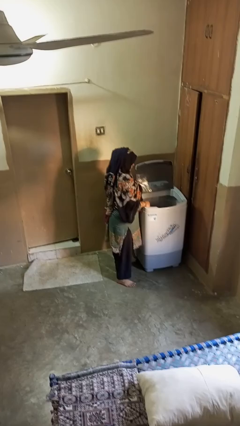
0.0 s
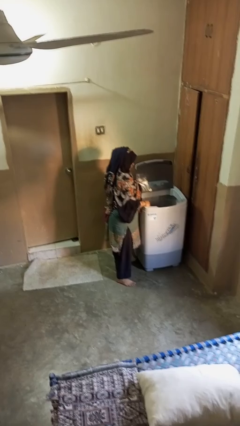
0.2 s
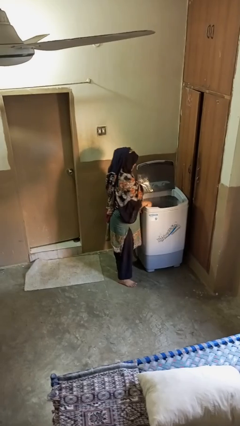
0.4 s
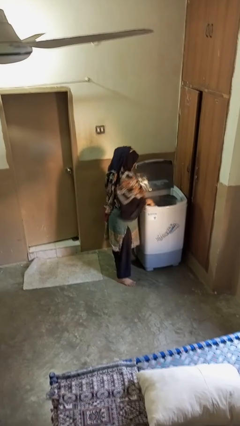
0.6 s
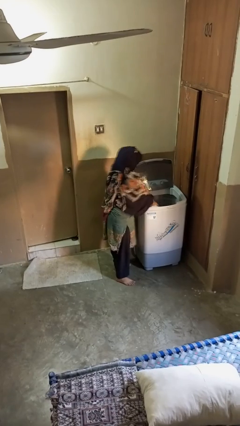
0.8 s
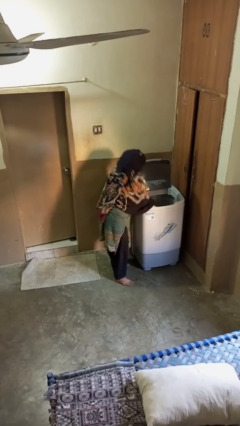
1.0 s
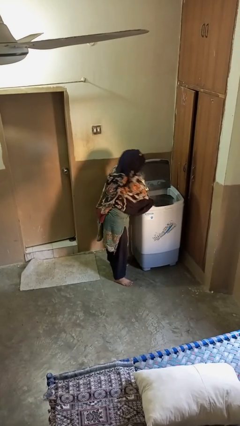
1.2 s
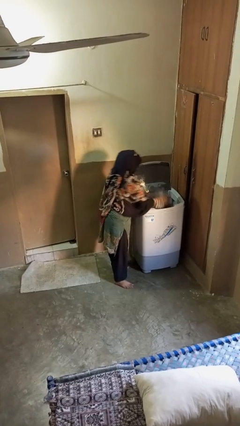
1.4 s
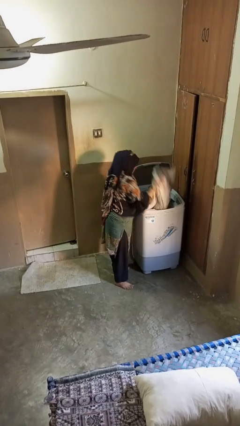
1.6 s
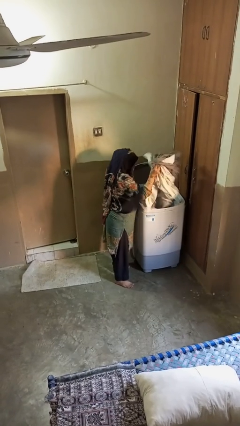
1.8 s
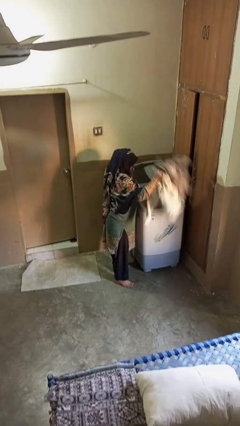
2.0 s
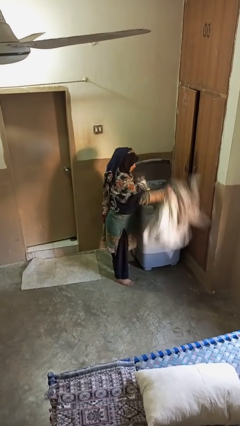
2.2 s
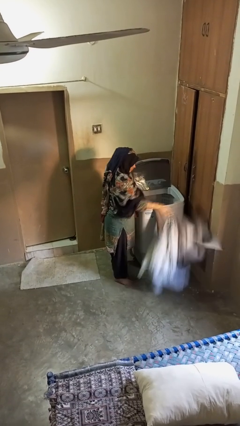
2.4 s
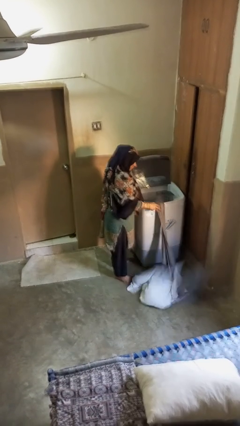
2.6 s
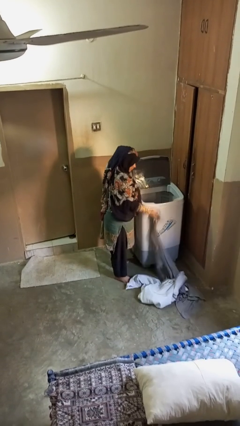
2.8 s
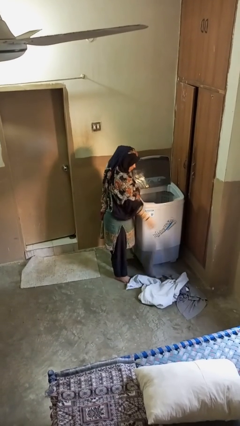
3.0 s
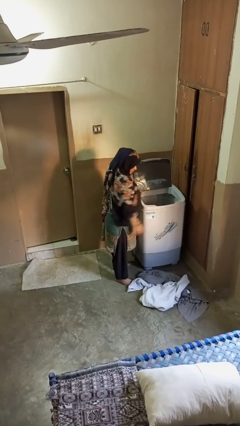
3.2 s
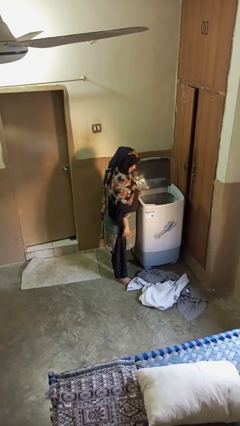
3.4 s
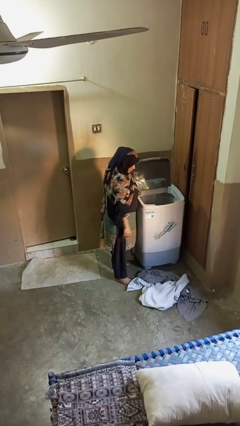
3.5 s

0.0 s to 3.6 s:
person unloads clotheswasher

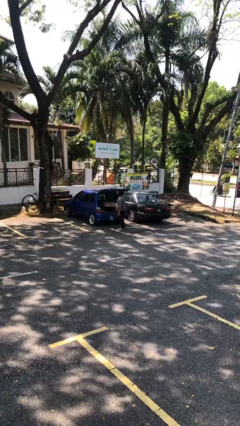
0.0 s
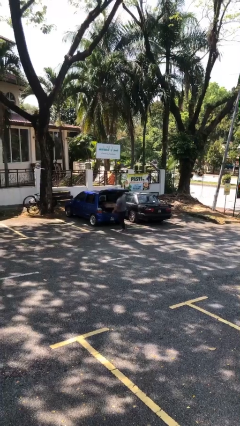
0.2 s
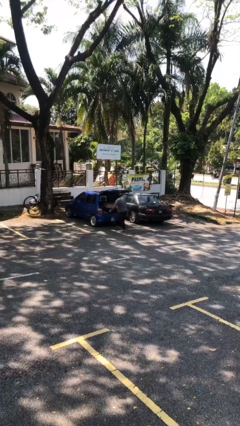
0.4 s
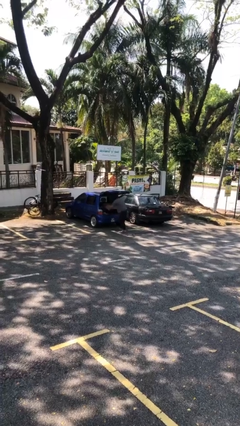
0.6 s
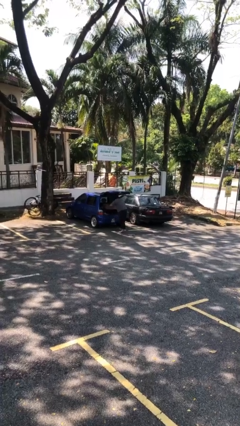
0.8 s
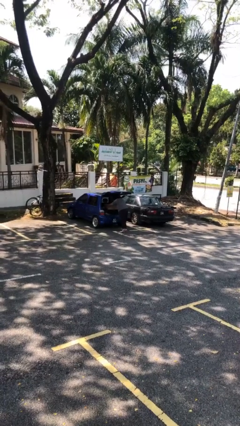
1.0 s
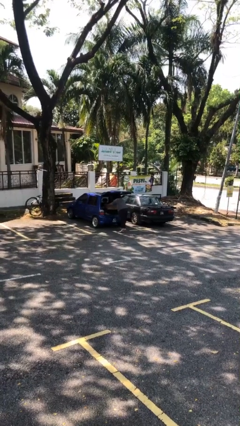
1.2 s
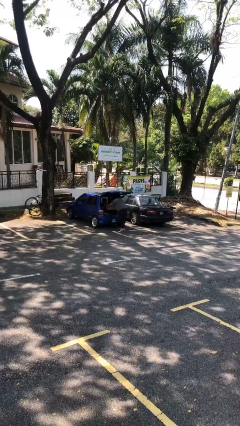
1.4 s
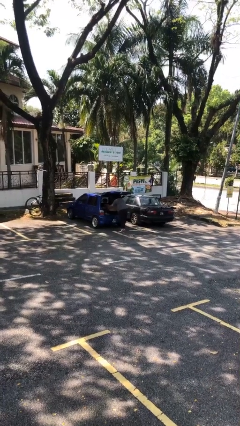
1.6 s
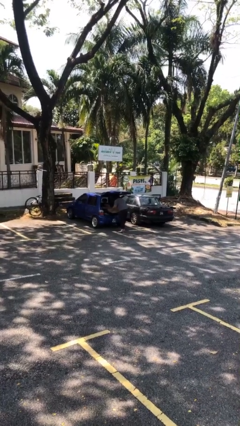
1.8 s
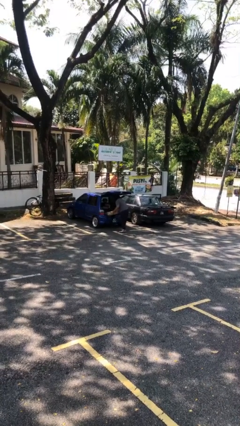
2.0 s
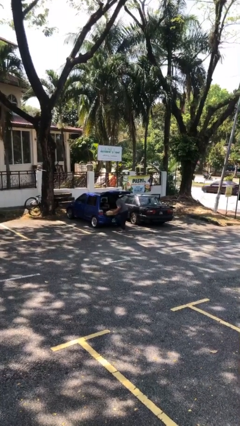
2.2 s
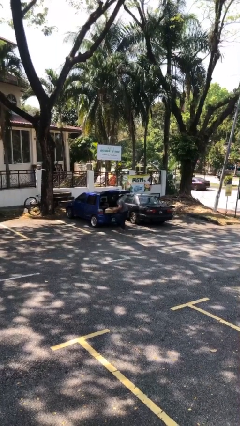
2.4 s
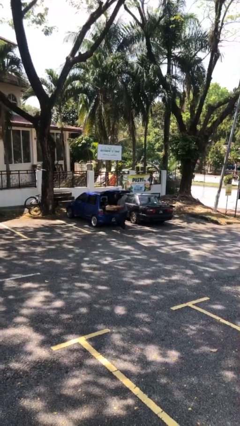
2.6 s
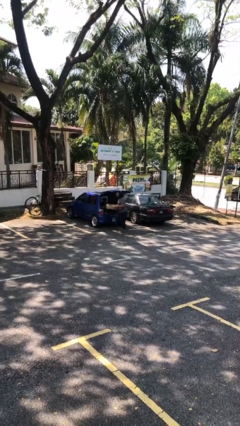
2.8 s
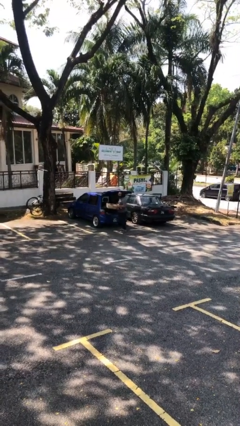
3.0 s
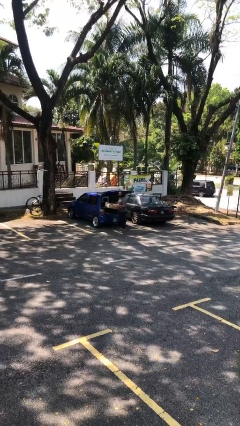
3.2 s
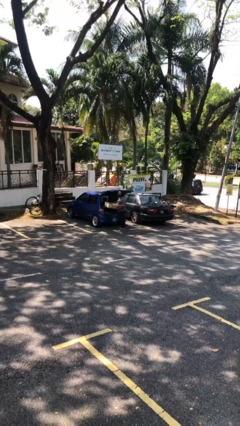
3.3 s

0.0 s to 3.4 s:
person unloads car

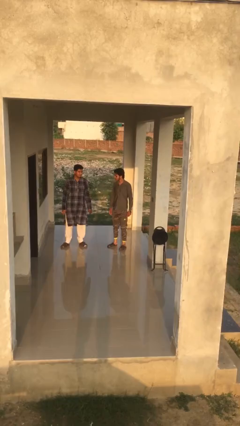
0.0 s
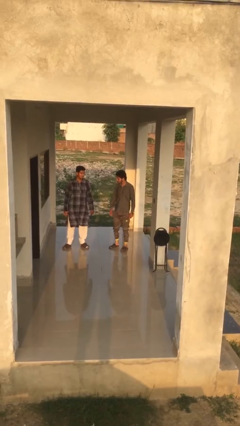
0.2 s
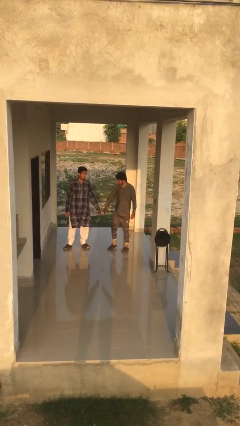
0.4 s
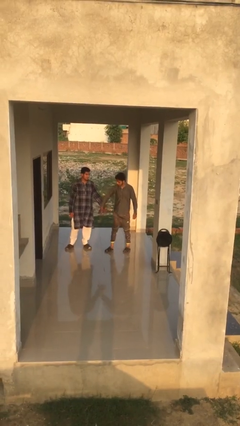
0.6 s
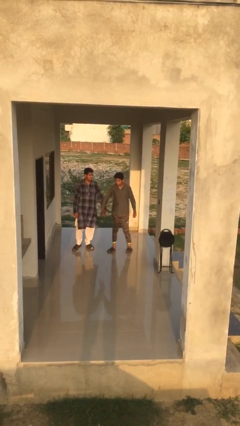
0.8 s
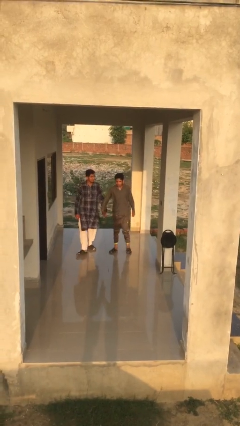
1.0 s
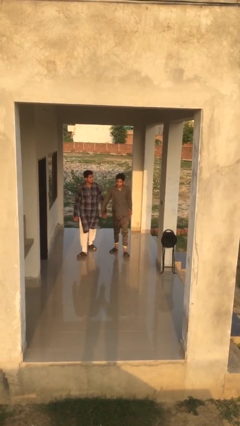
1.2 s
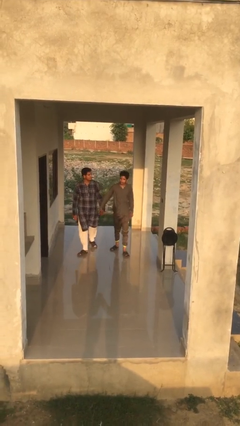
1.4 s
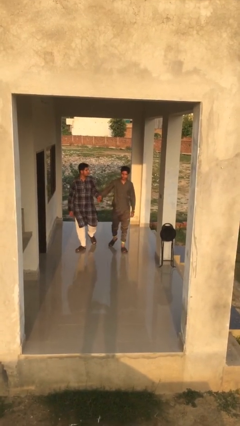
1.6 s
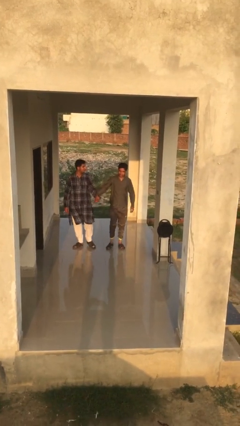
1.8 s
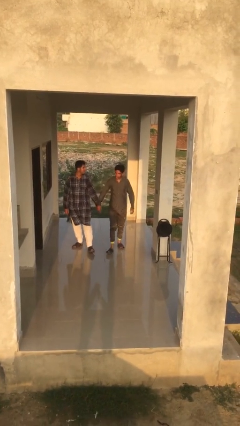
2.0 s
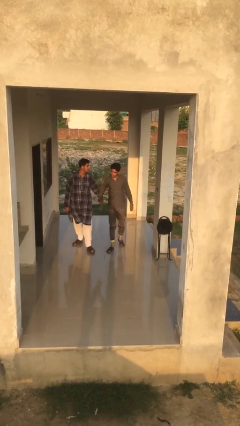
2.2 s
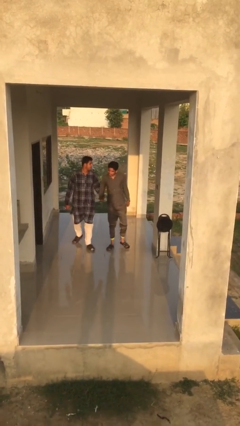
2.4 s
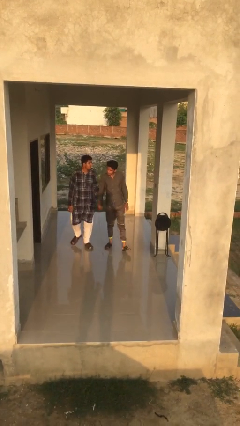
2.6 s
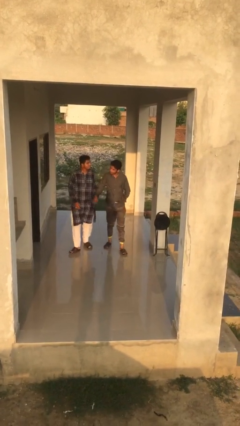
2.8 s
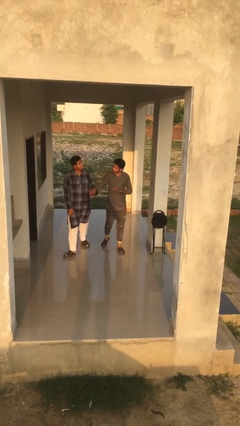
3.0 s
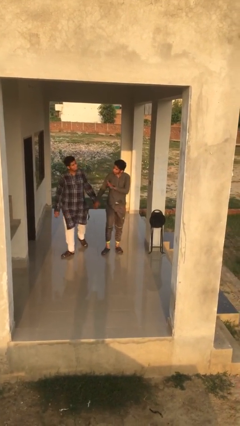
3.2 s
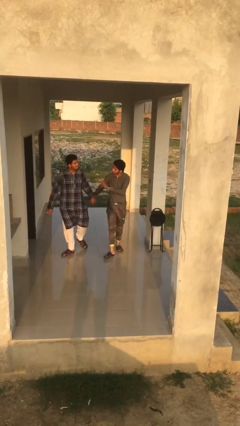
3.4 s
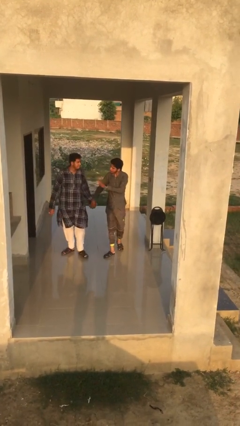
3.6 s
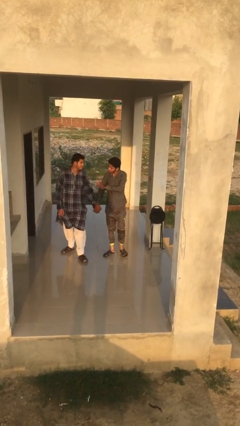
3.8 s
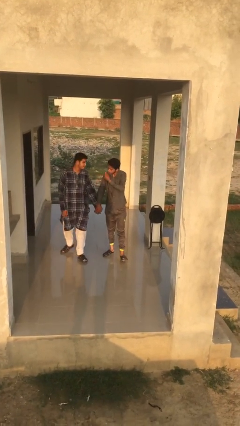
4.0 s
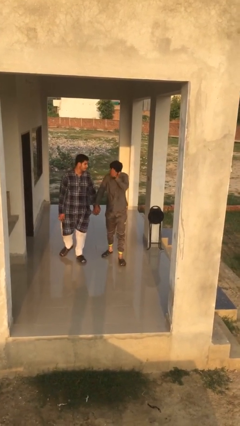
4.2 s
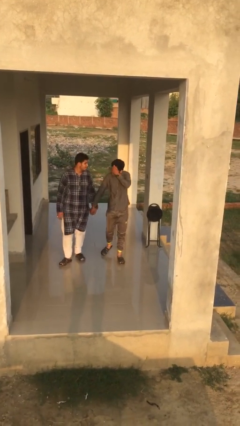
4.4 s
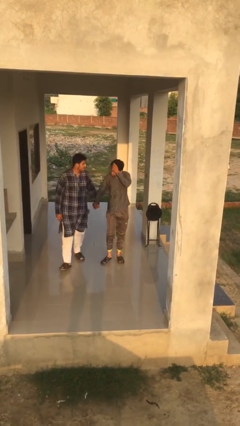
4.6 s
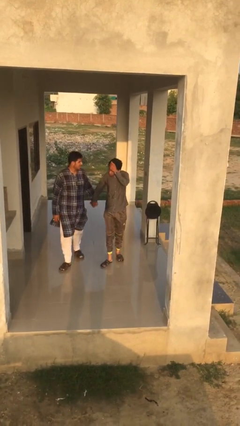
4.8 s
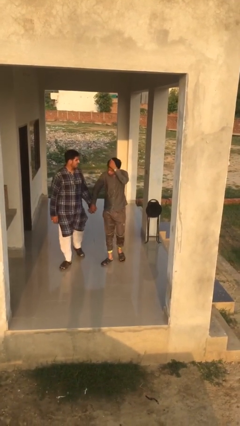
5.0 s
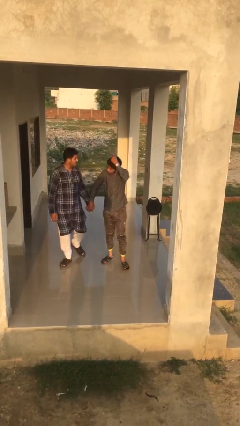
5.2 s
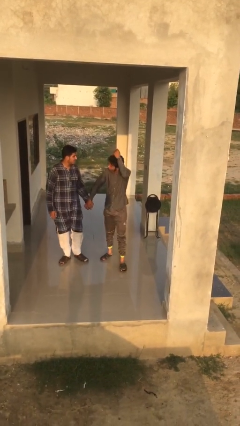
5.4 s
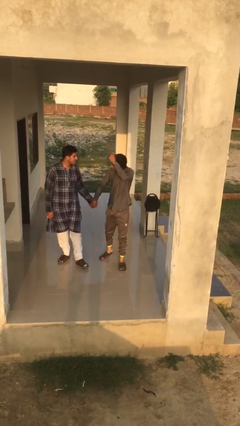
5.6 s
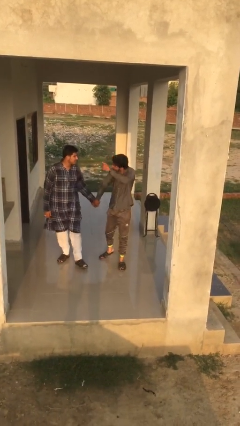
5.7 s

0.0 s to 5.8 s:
person holds hand

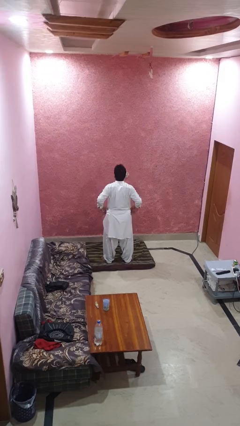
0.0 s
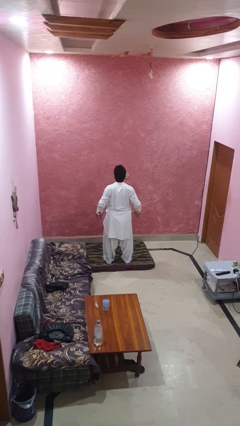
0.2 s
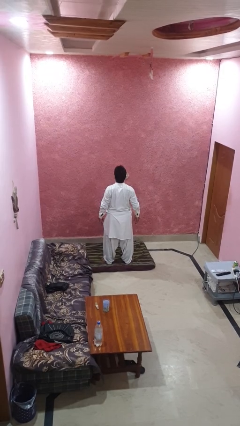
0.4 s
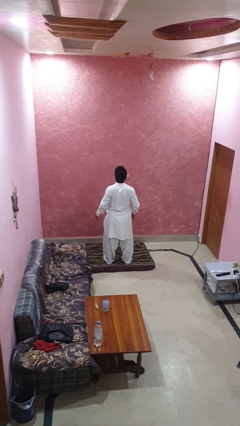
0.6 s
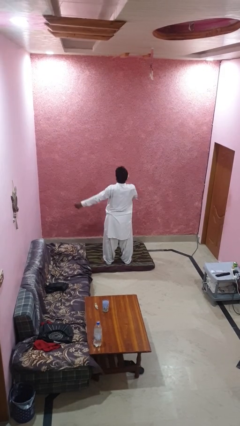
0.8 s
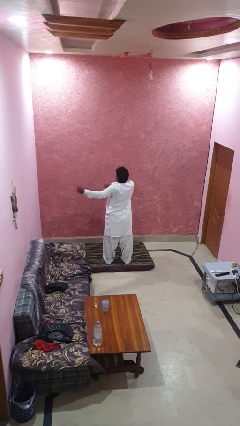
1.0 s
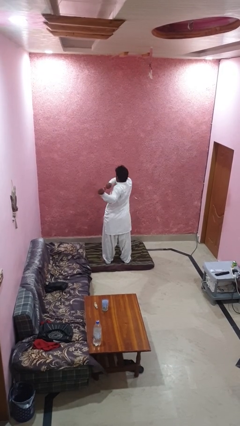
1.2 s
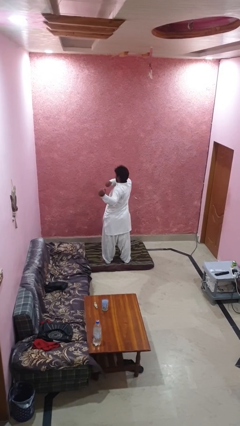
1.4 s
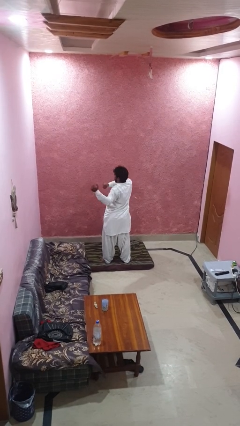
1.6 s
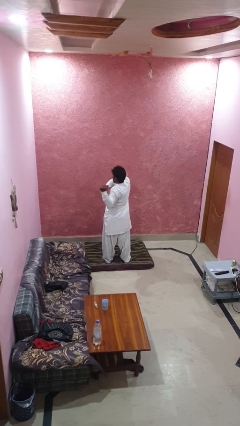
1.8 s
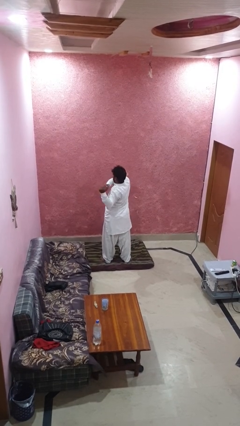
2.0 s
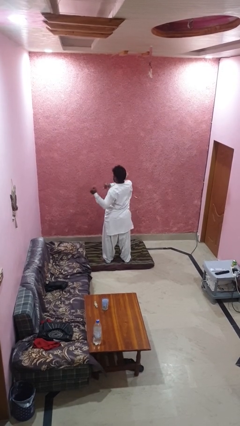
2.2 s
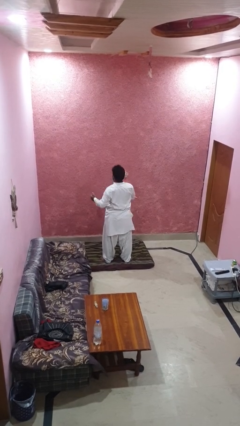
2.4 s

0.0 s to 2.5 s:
person stretches arms to side

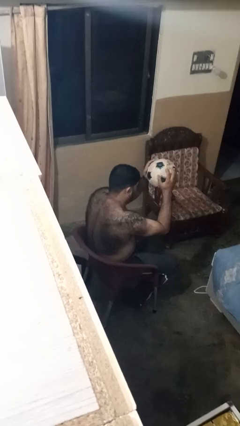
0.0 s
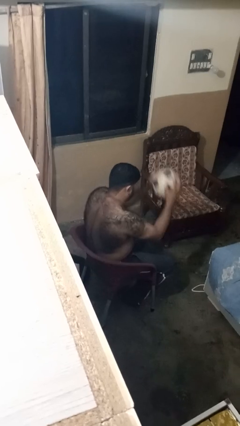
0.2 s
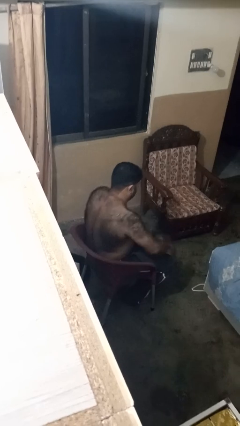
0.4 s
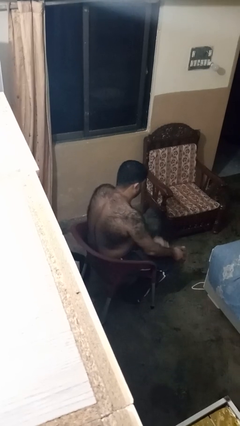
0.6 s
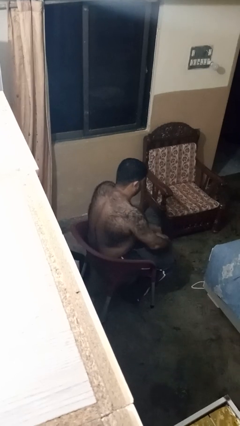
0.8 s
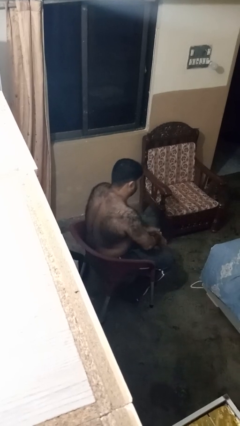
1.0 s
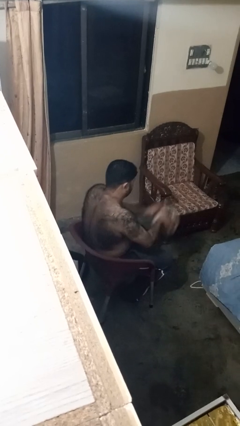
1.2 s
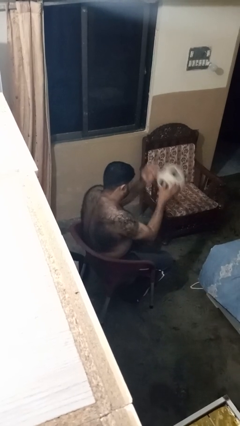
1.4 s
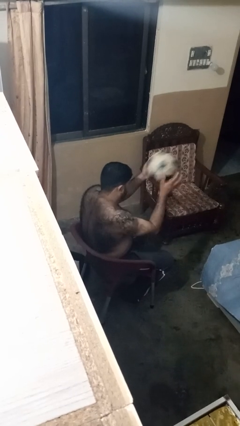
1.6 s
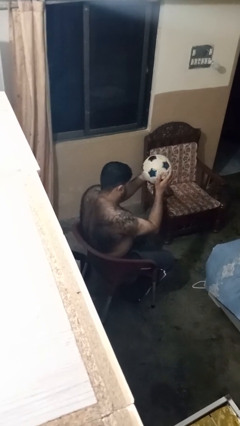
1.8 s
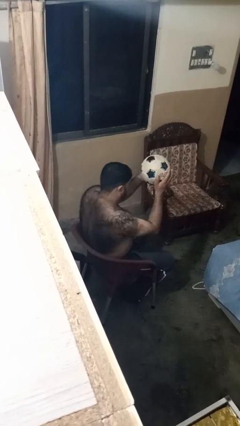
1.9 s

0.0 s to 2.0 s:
person bounces ball on floor

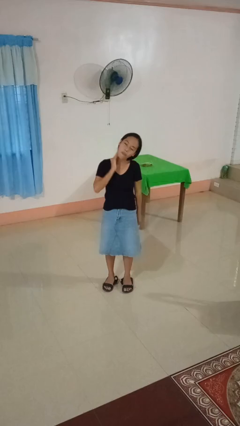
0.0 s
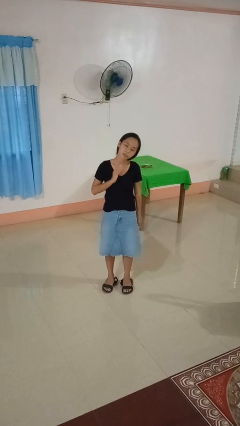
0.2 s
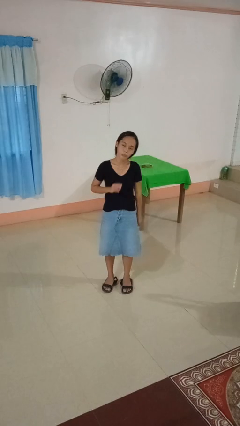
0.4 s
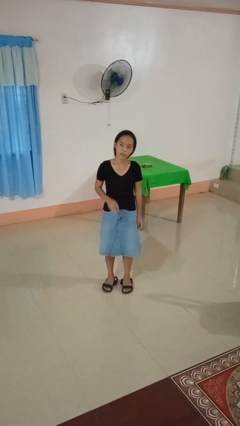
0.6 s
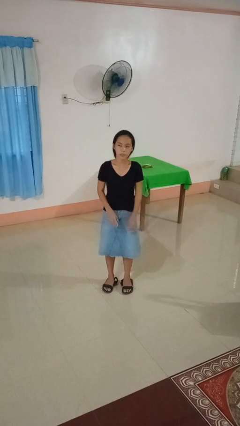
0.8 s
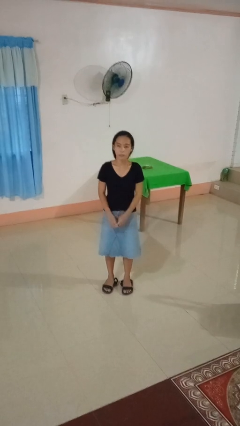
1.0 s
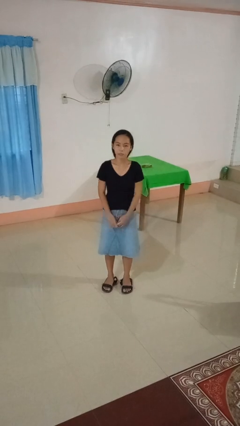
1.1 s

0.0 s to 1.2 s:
person swats bug
